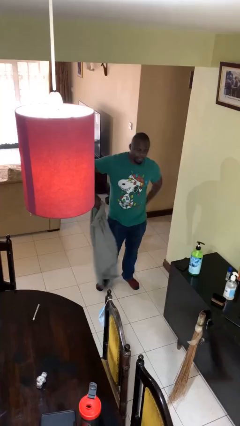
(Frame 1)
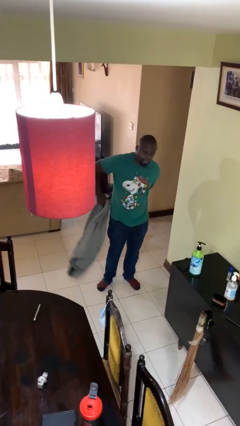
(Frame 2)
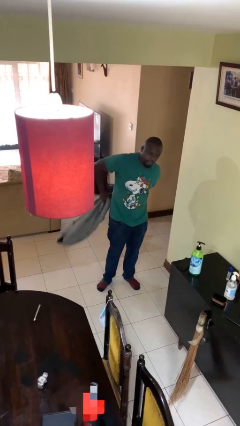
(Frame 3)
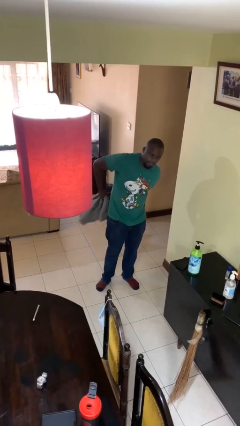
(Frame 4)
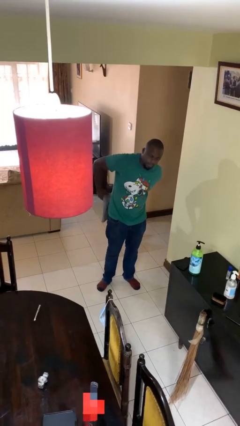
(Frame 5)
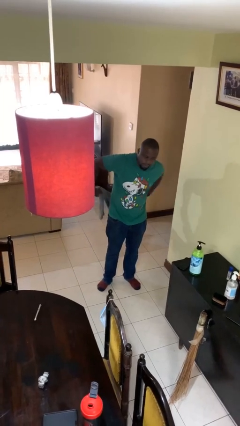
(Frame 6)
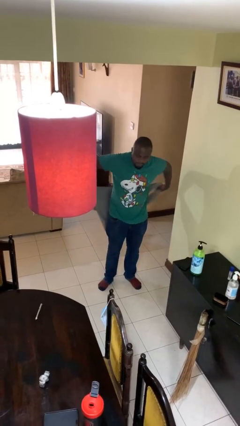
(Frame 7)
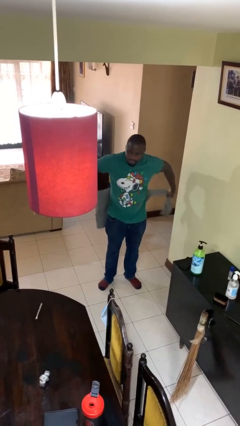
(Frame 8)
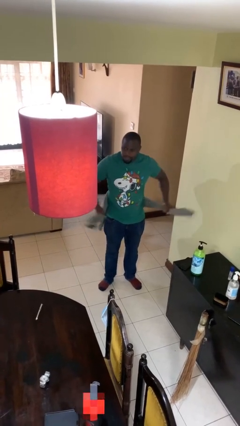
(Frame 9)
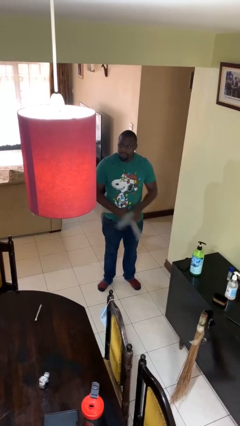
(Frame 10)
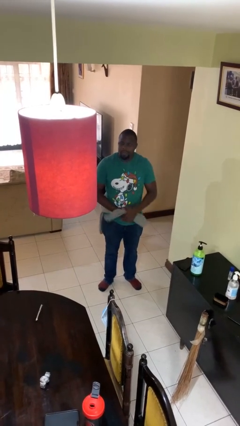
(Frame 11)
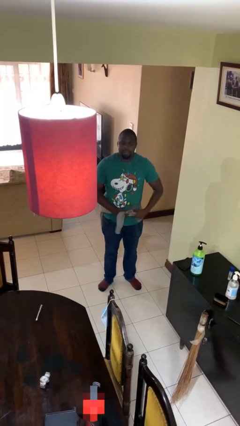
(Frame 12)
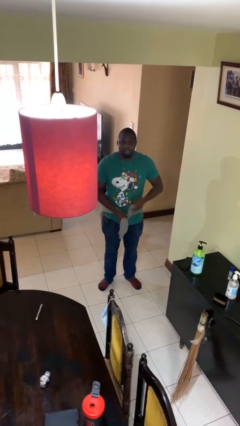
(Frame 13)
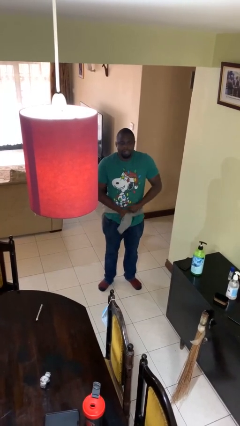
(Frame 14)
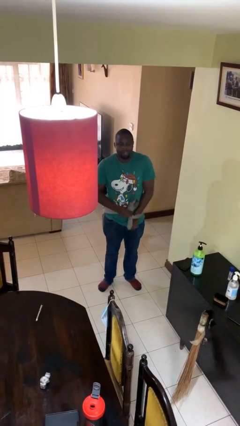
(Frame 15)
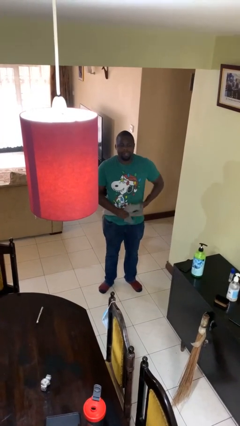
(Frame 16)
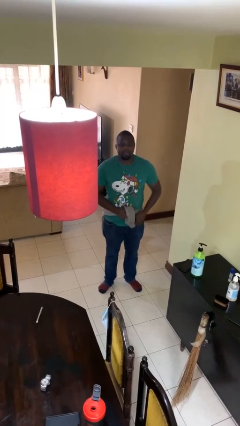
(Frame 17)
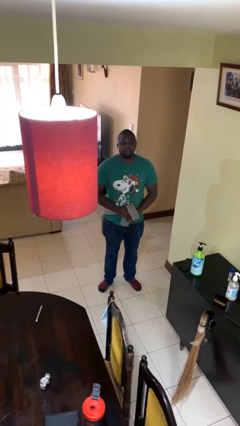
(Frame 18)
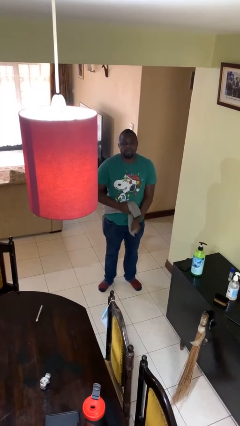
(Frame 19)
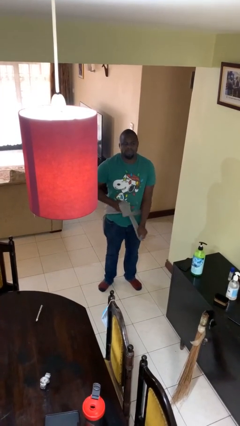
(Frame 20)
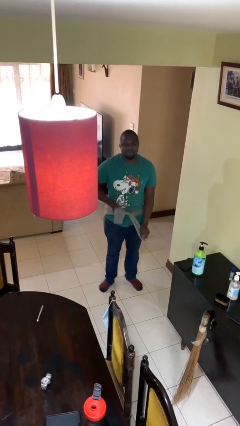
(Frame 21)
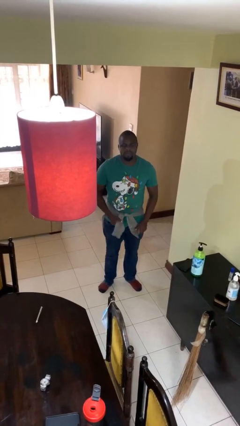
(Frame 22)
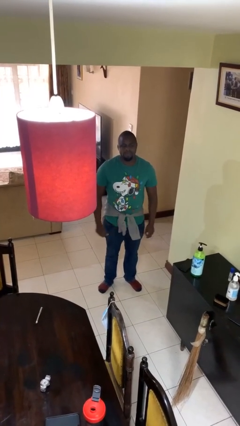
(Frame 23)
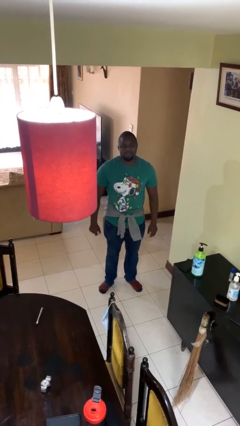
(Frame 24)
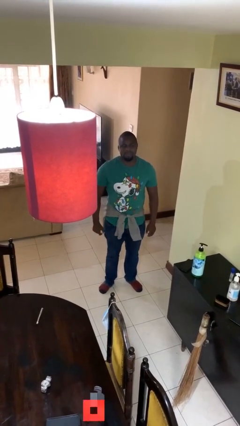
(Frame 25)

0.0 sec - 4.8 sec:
person ties jacket around waist

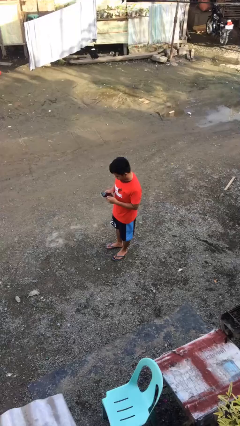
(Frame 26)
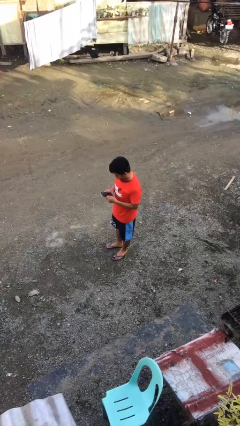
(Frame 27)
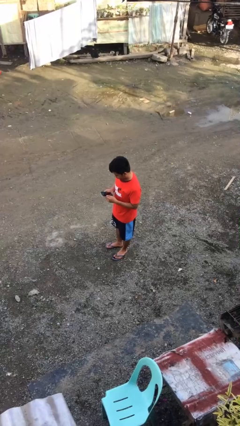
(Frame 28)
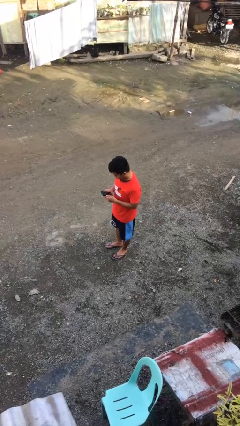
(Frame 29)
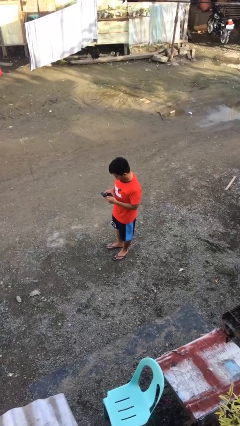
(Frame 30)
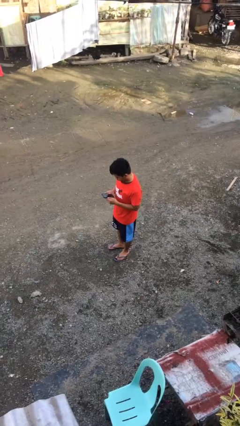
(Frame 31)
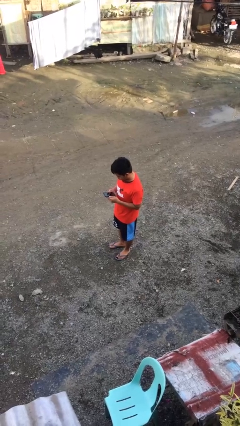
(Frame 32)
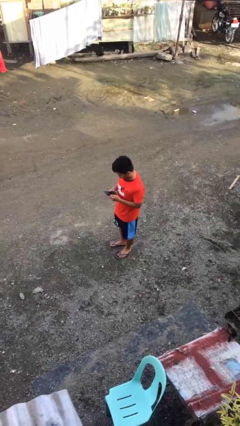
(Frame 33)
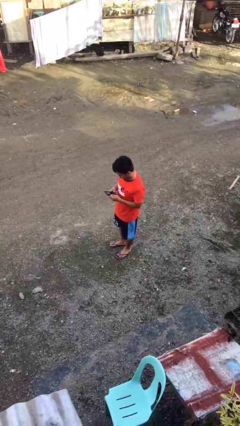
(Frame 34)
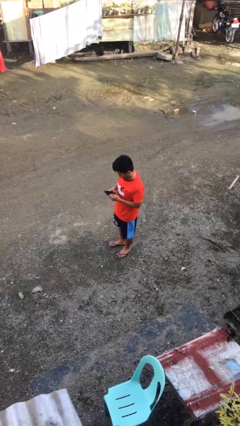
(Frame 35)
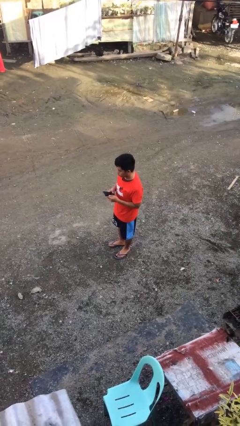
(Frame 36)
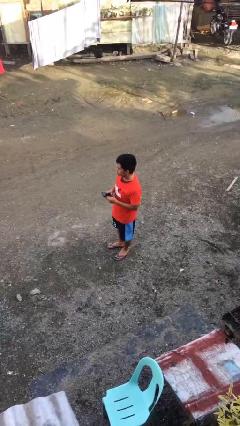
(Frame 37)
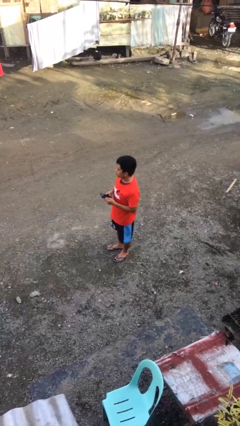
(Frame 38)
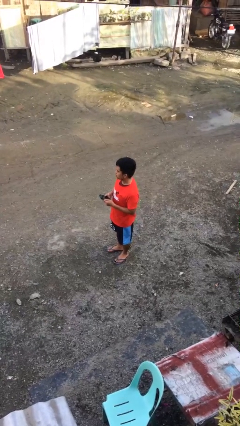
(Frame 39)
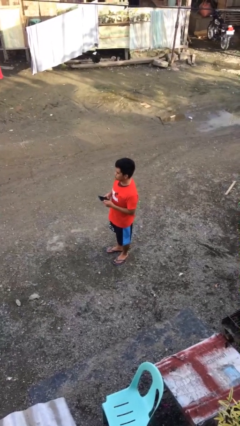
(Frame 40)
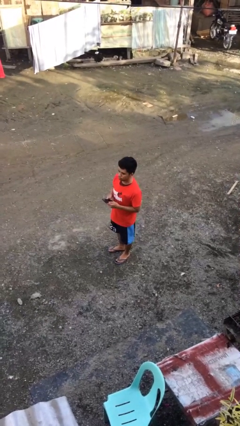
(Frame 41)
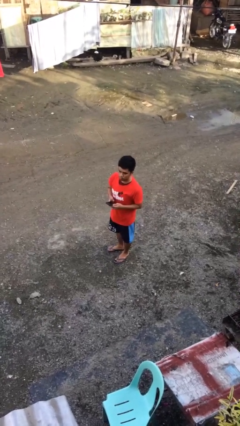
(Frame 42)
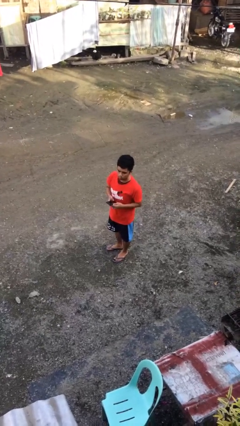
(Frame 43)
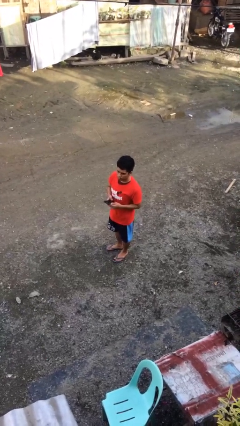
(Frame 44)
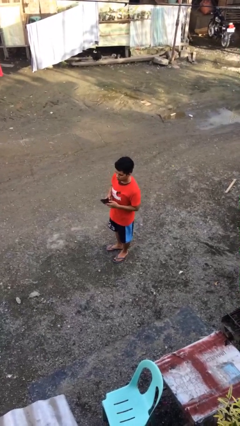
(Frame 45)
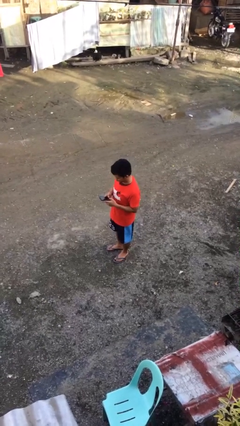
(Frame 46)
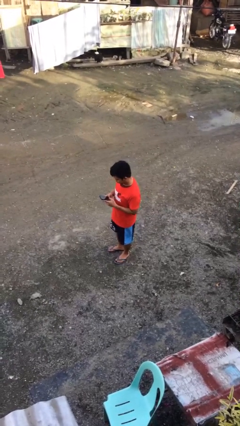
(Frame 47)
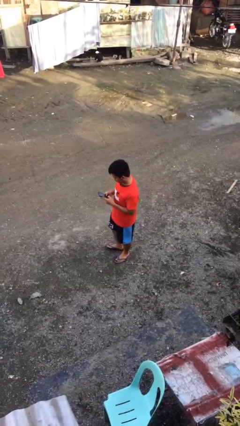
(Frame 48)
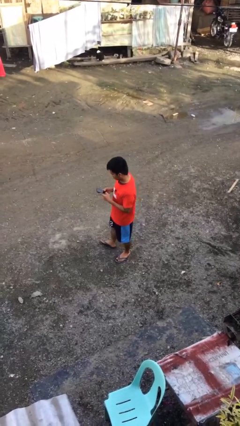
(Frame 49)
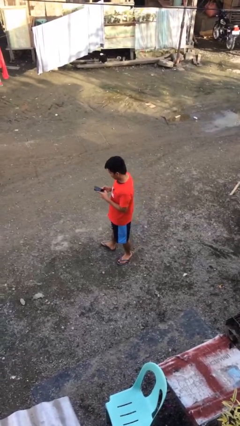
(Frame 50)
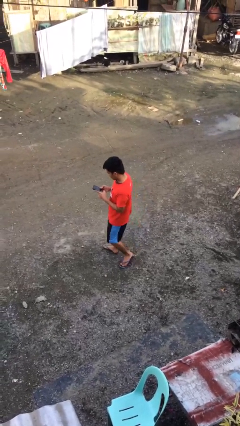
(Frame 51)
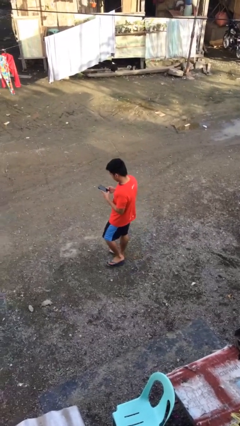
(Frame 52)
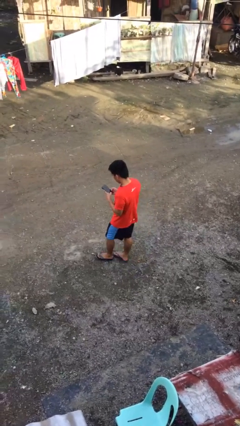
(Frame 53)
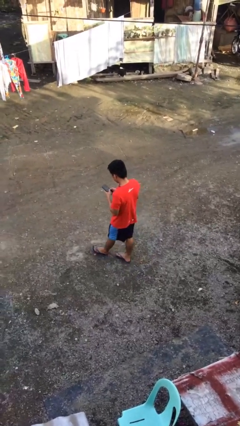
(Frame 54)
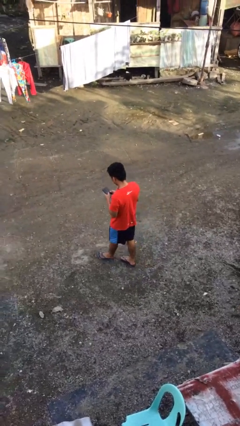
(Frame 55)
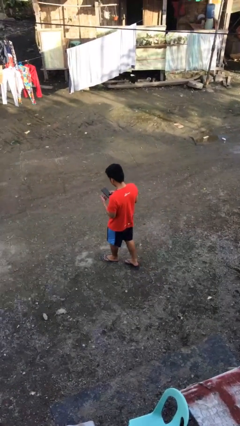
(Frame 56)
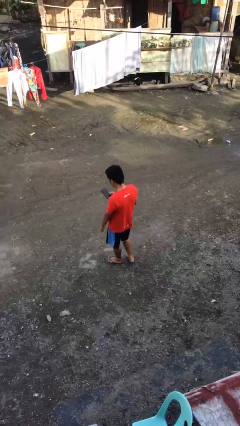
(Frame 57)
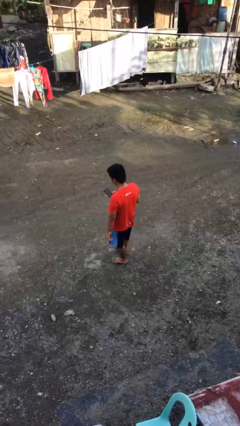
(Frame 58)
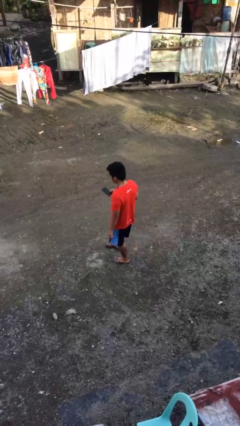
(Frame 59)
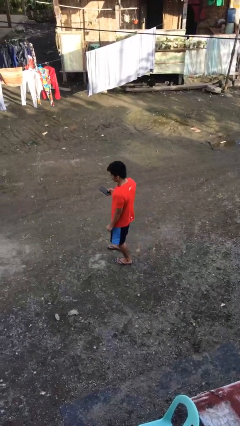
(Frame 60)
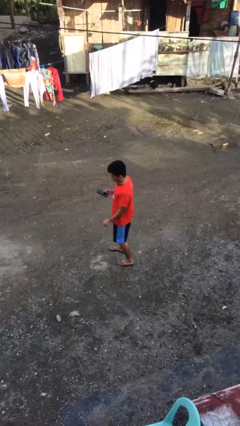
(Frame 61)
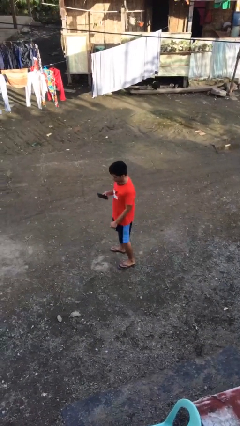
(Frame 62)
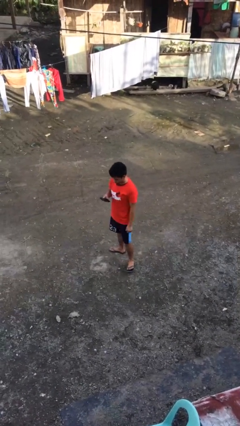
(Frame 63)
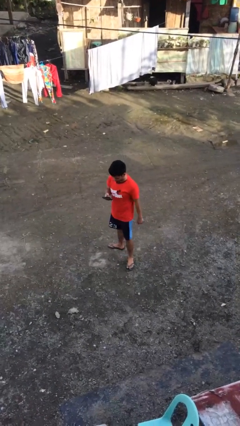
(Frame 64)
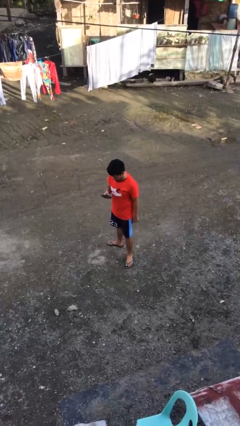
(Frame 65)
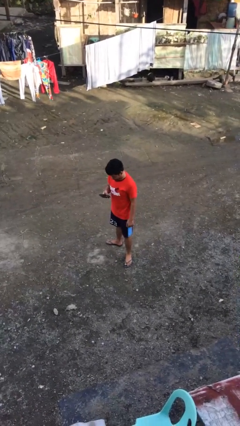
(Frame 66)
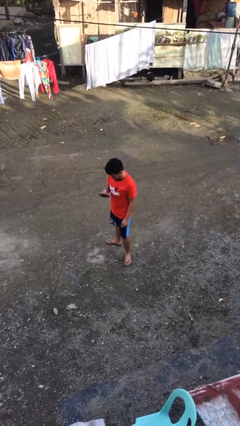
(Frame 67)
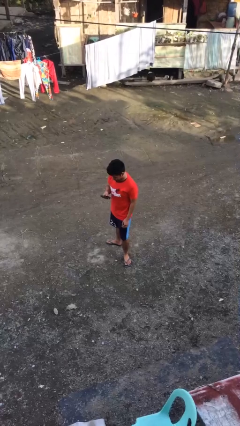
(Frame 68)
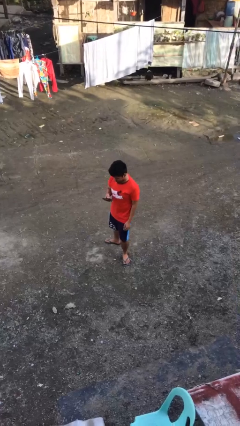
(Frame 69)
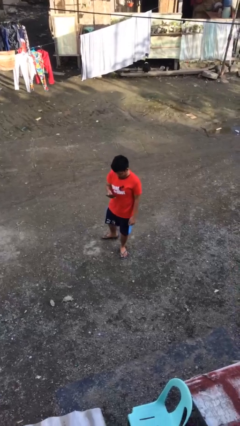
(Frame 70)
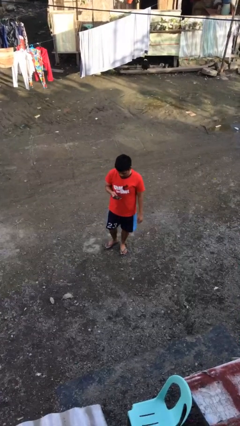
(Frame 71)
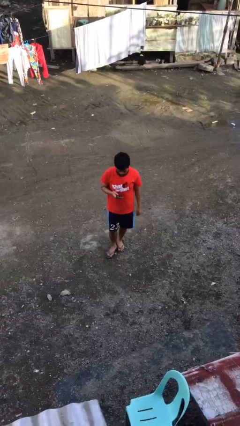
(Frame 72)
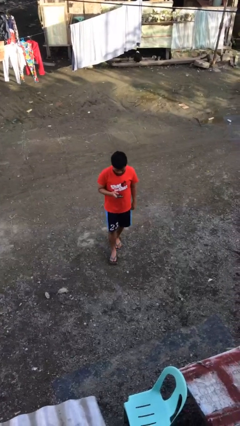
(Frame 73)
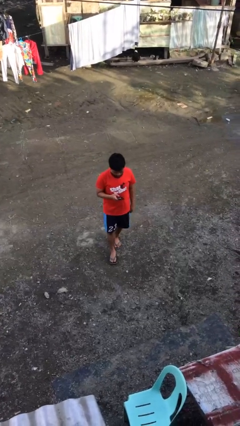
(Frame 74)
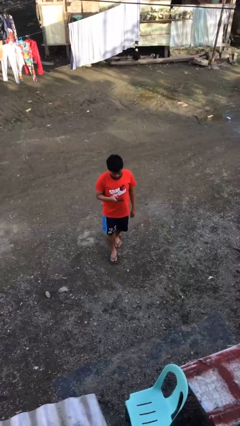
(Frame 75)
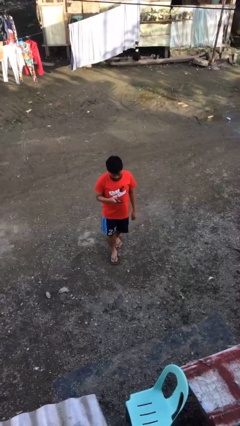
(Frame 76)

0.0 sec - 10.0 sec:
person walks

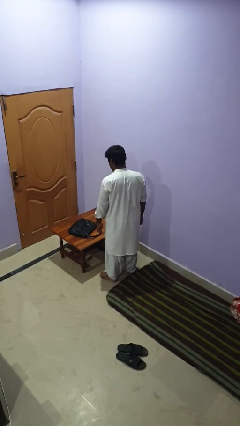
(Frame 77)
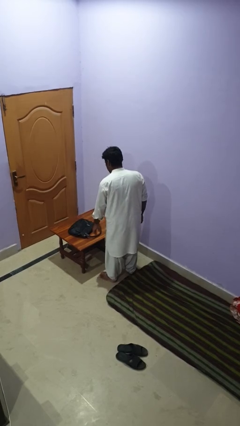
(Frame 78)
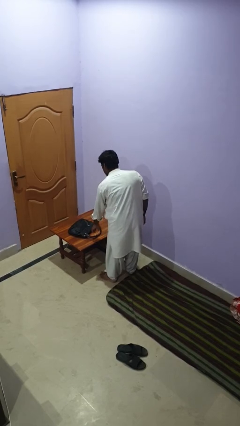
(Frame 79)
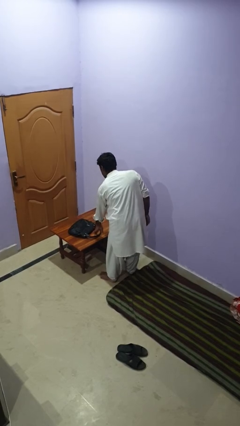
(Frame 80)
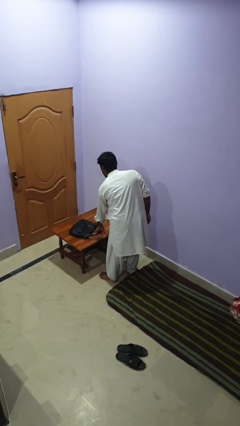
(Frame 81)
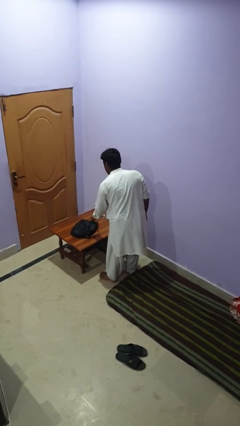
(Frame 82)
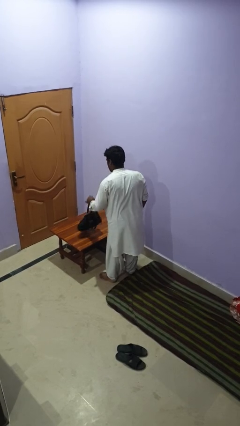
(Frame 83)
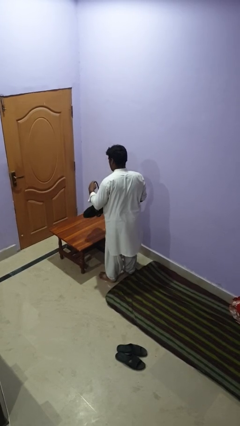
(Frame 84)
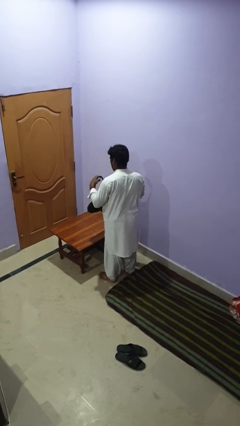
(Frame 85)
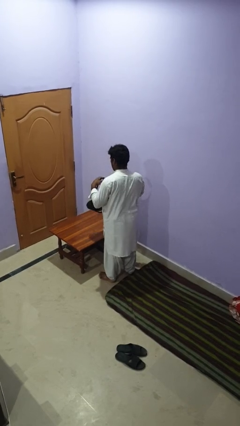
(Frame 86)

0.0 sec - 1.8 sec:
person picks up object from table

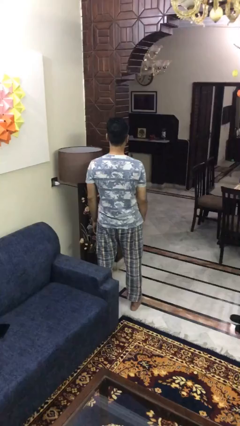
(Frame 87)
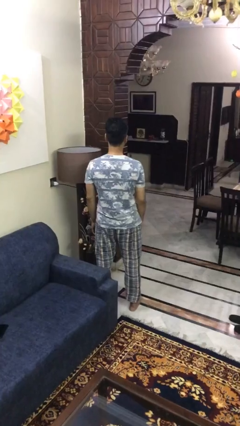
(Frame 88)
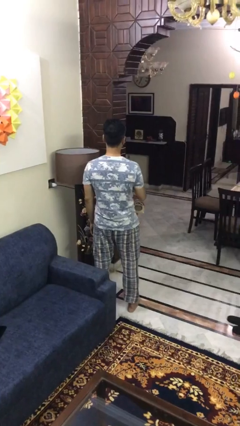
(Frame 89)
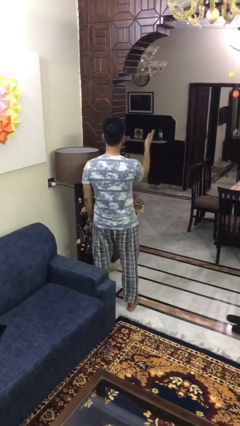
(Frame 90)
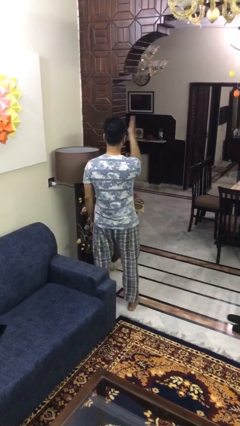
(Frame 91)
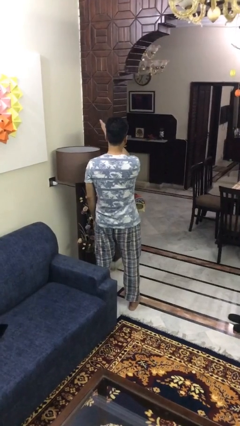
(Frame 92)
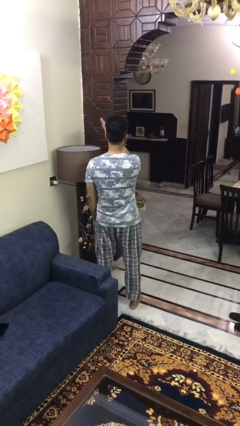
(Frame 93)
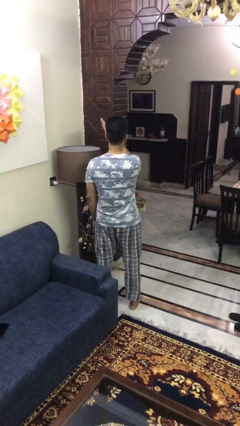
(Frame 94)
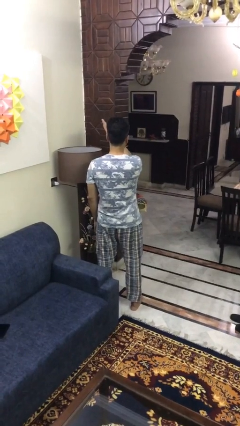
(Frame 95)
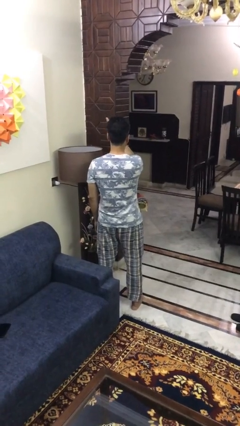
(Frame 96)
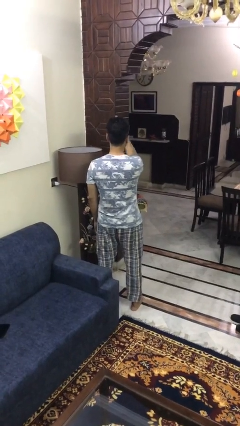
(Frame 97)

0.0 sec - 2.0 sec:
person gestures swipe left
